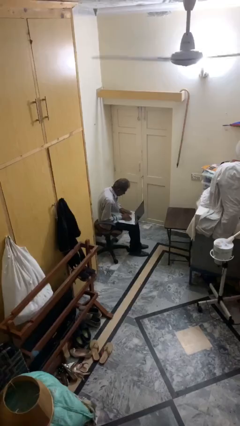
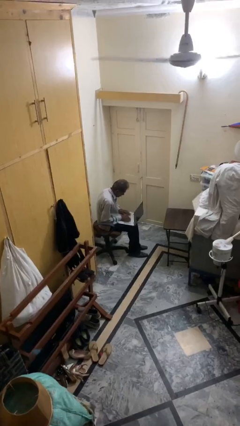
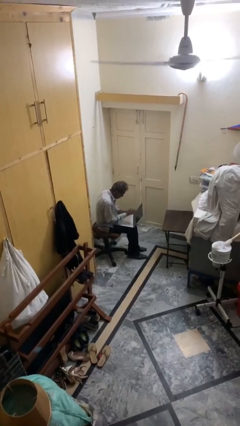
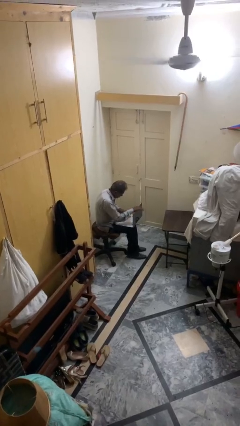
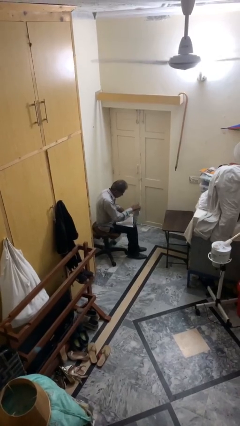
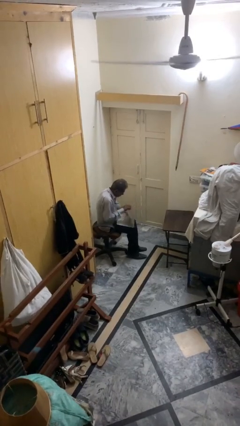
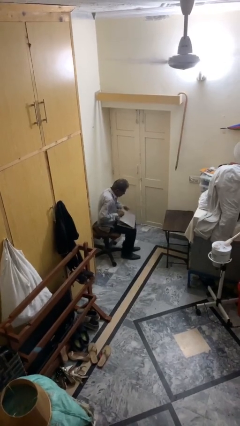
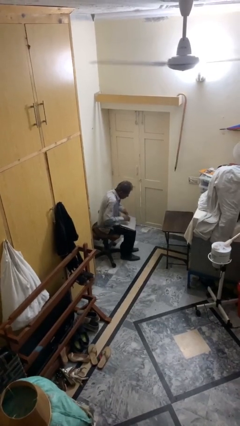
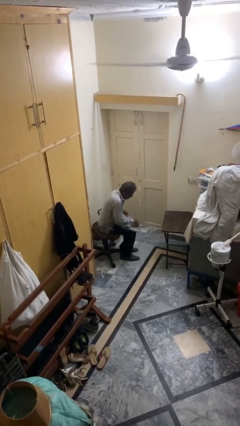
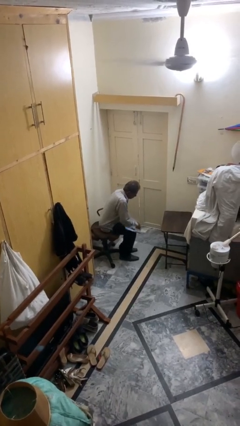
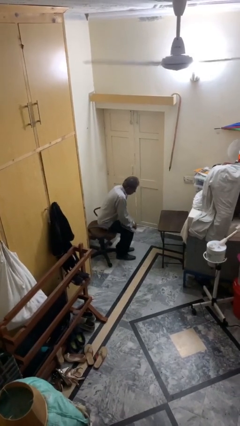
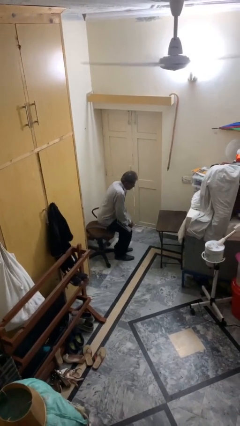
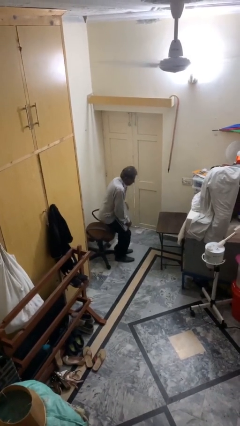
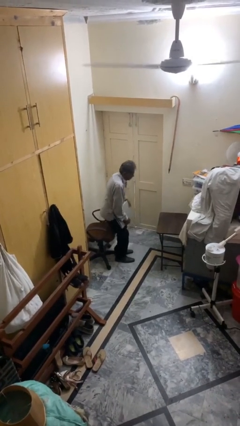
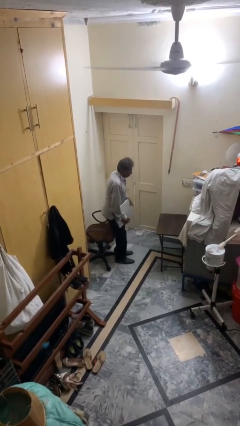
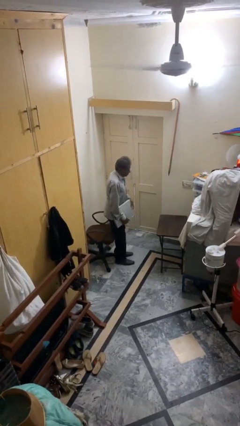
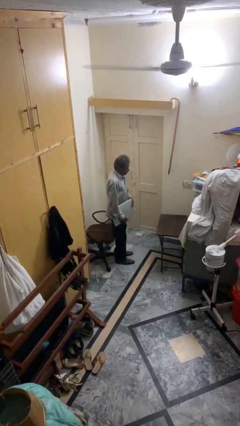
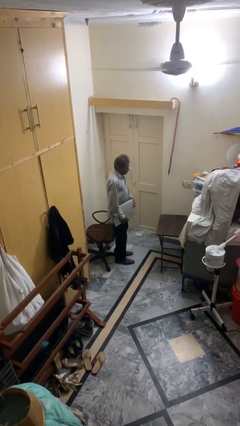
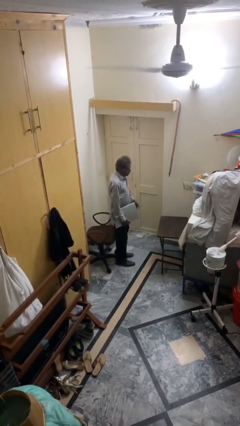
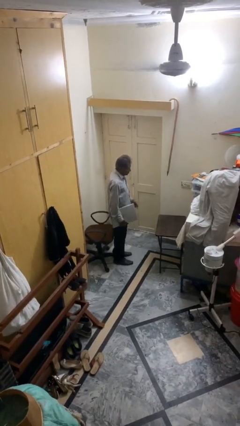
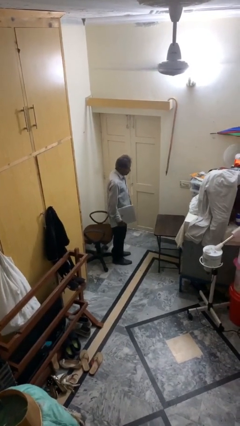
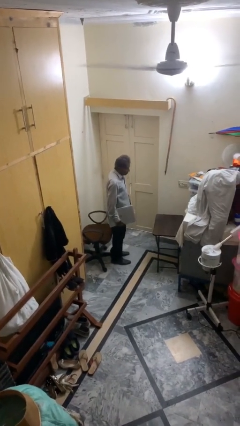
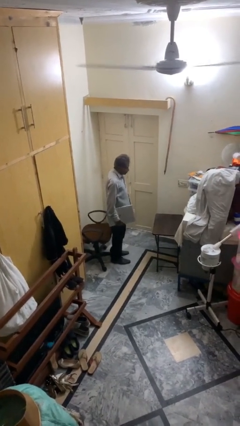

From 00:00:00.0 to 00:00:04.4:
person stands up

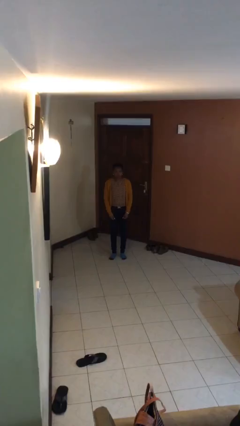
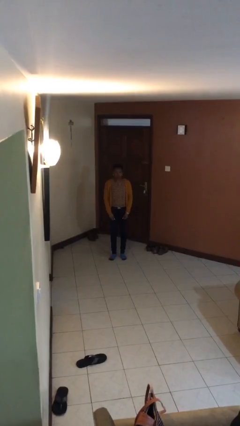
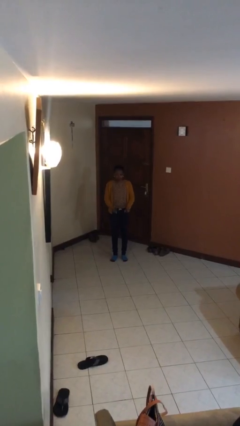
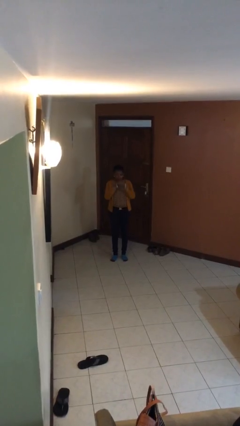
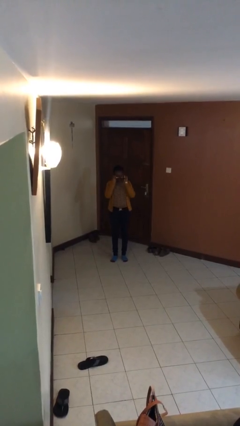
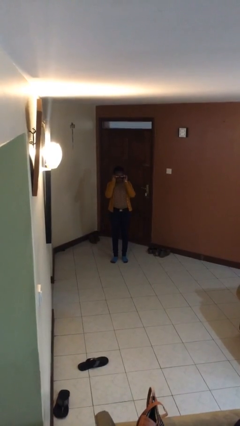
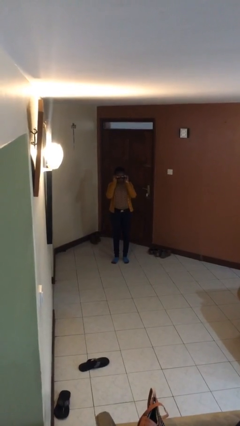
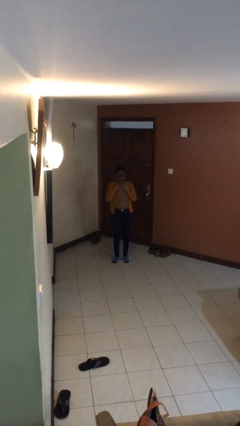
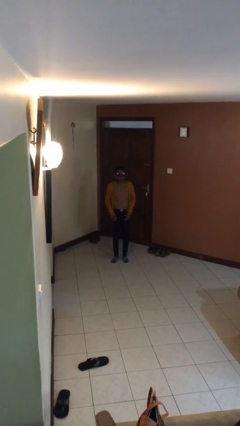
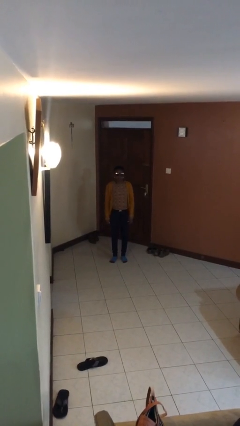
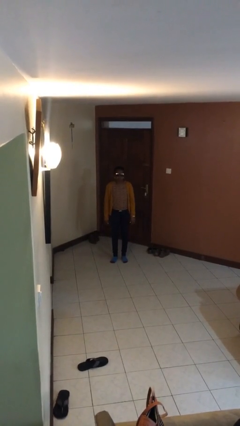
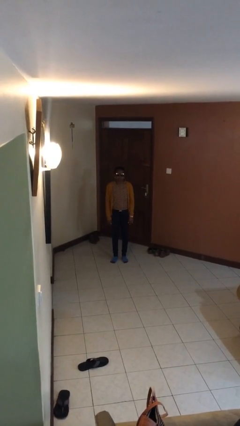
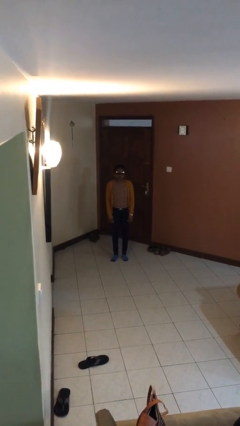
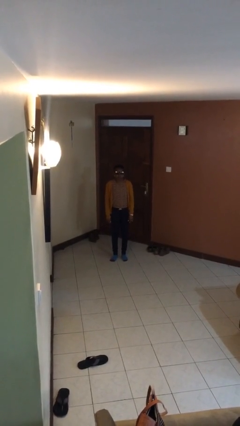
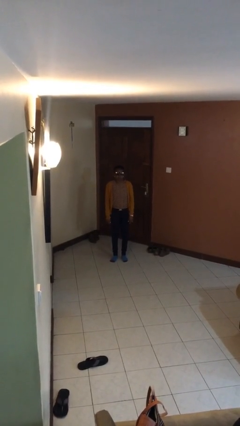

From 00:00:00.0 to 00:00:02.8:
person puts on sunglasses

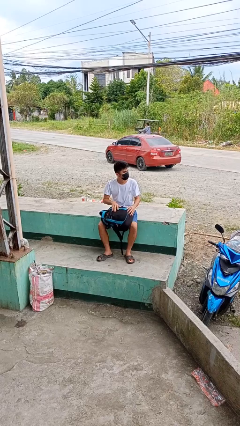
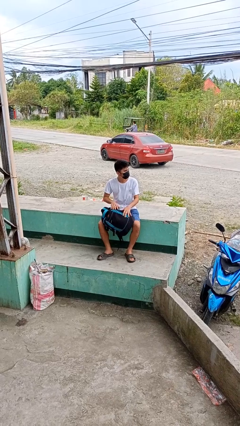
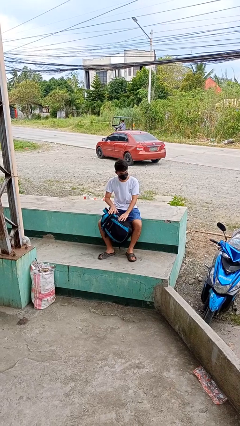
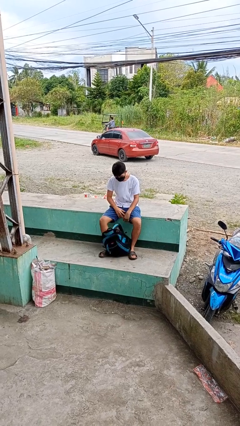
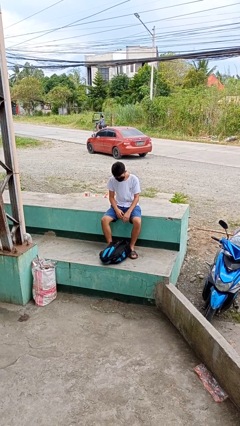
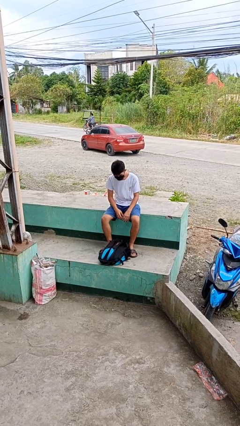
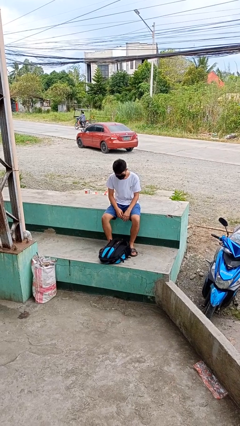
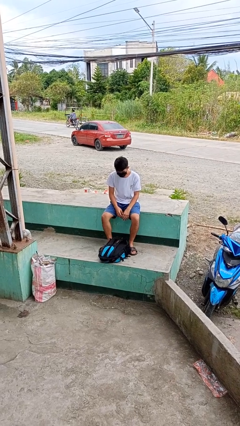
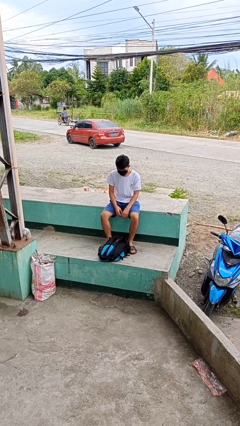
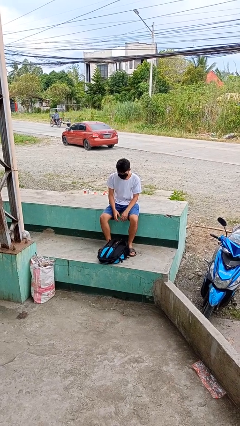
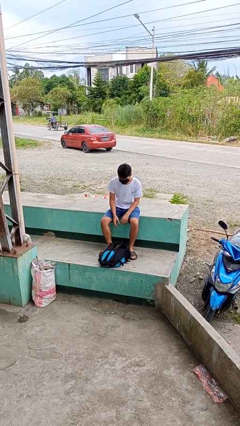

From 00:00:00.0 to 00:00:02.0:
person drops object

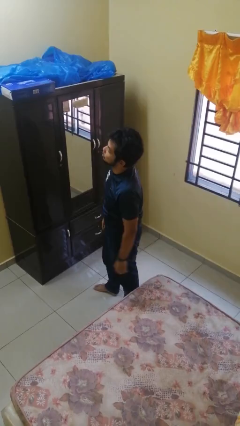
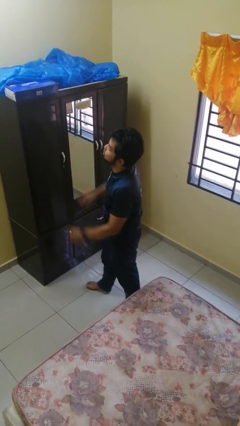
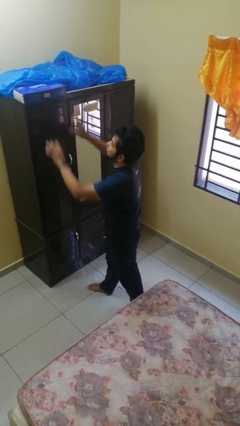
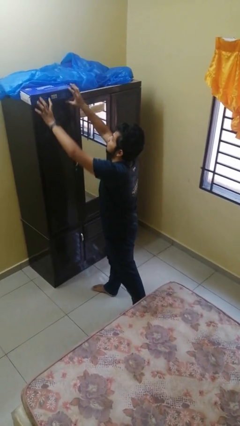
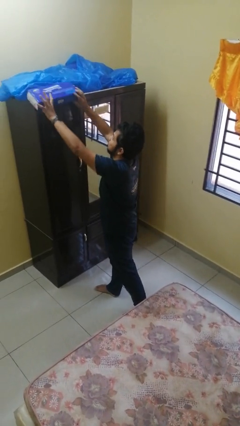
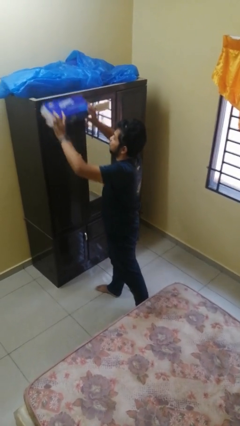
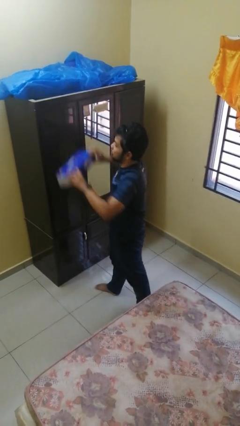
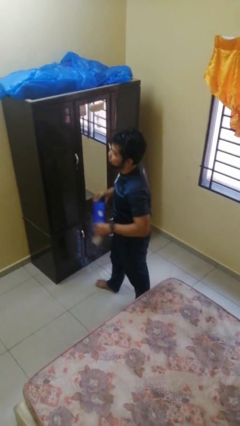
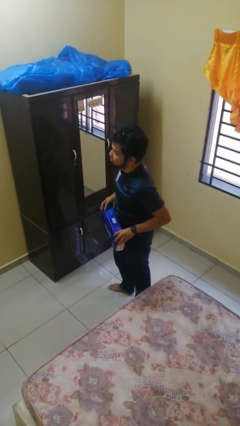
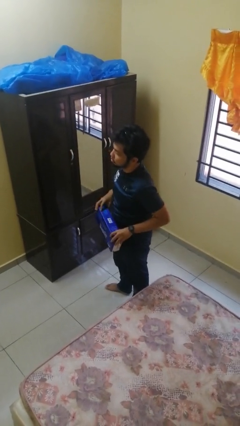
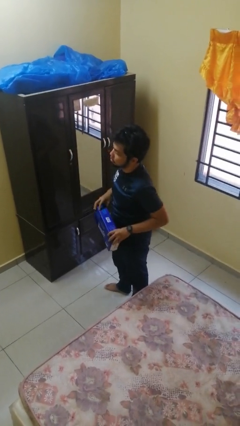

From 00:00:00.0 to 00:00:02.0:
person picks up object from countertop

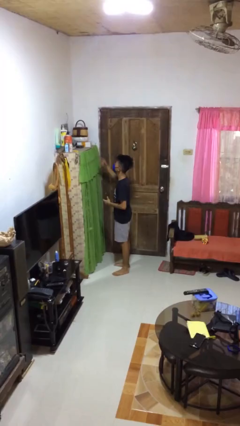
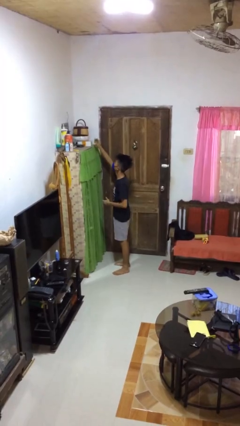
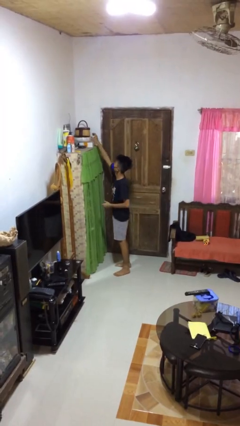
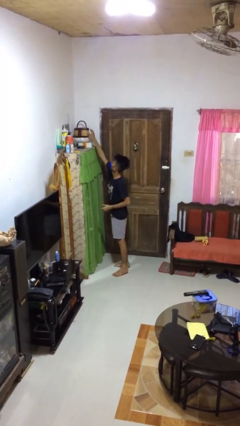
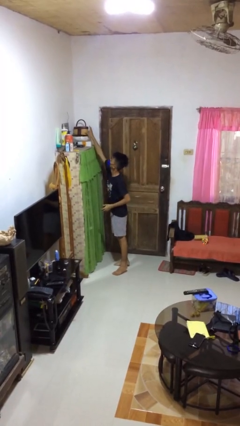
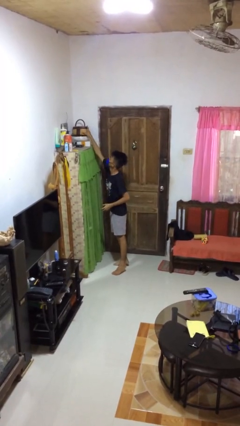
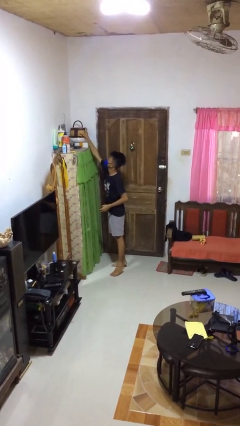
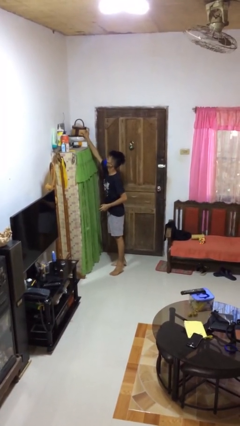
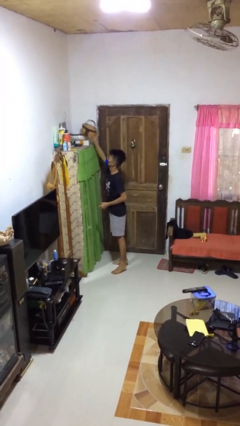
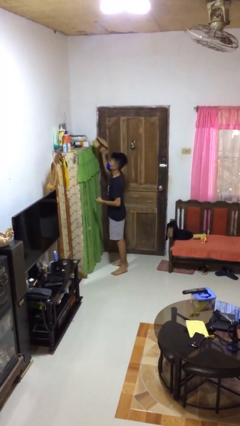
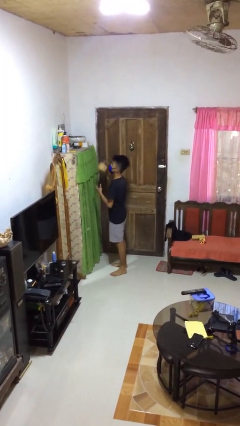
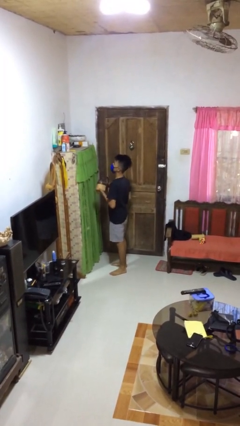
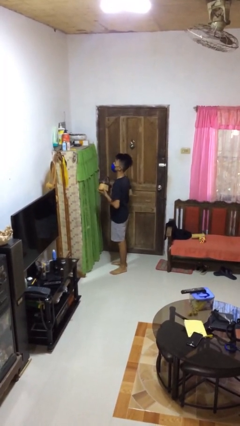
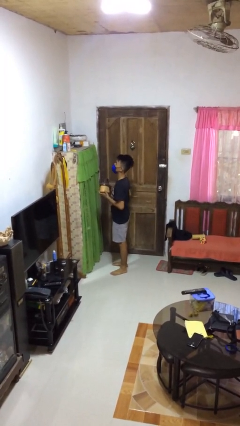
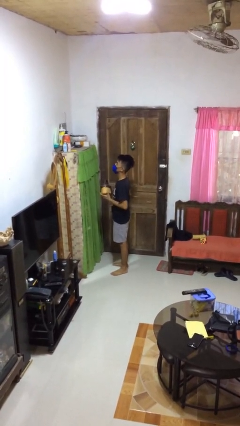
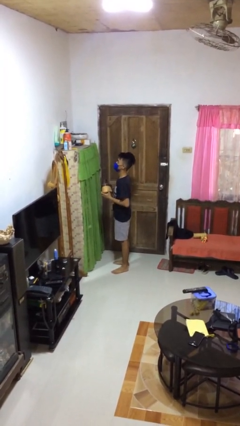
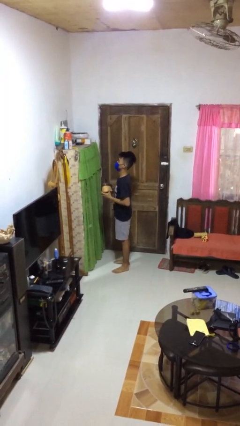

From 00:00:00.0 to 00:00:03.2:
person picks up object from shelf

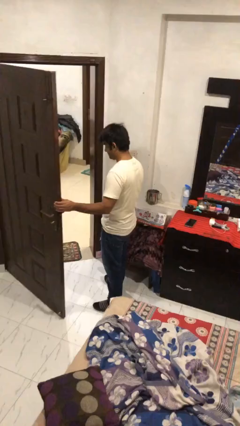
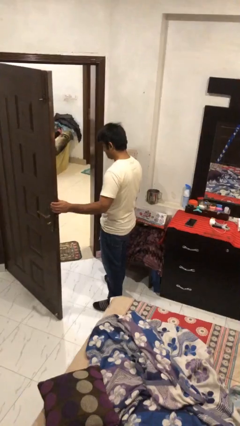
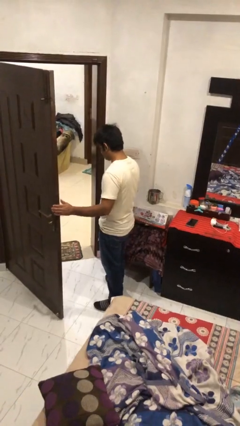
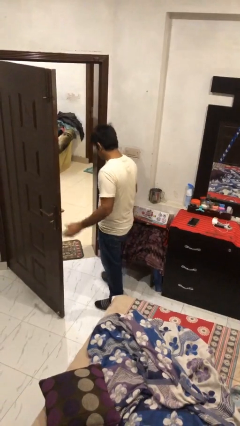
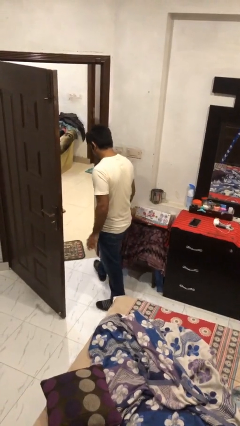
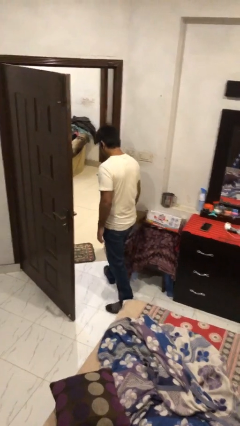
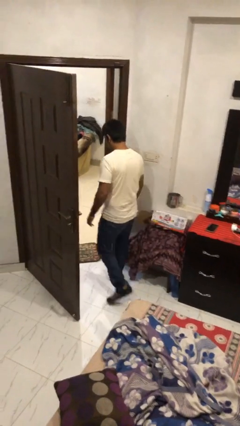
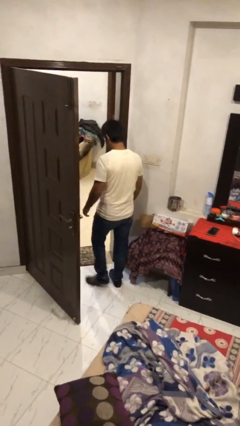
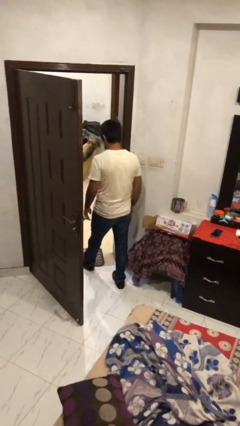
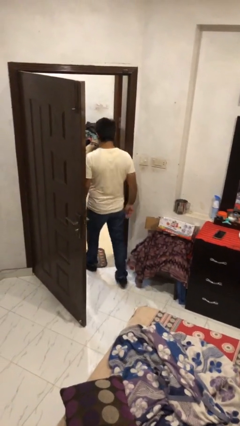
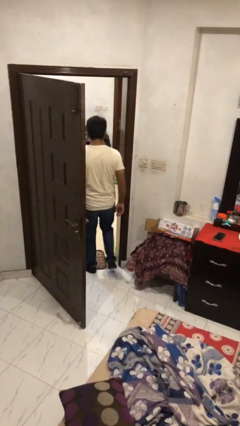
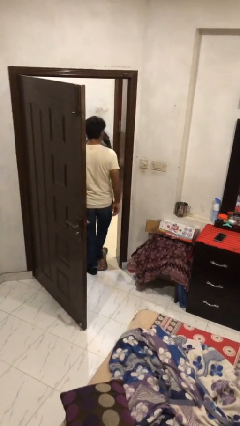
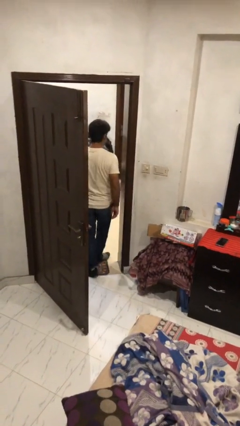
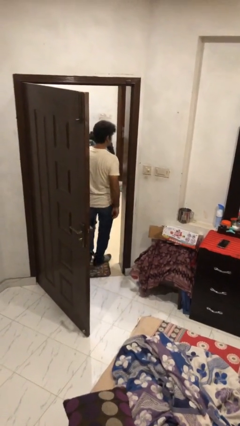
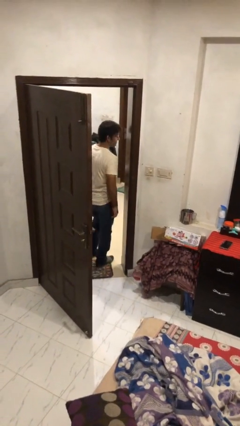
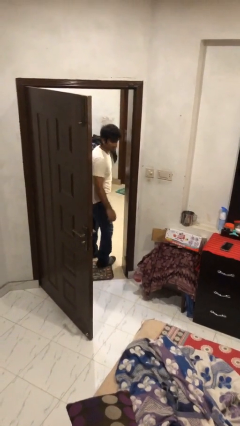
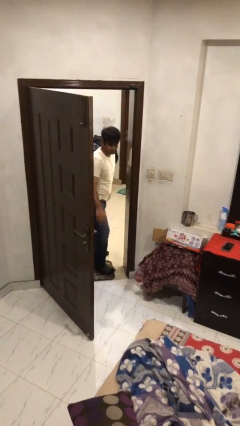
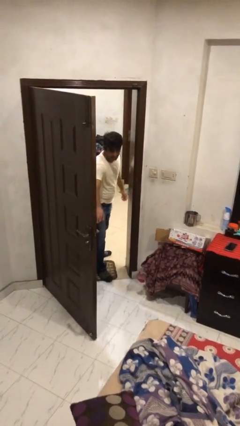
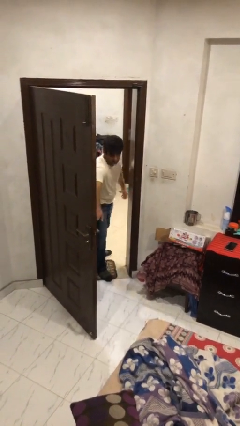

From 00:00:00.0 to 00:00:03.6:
person exits scene through structure
